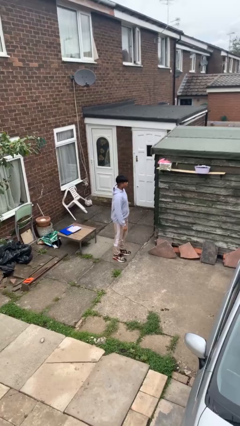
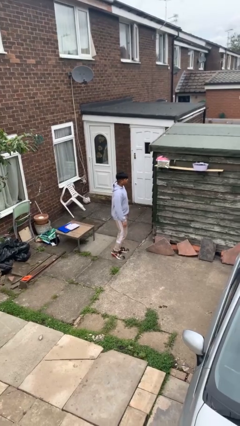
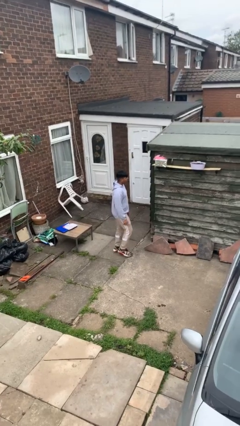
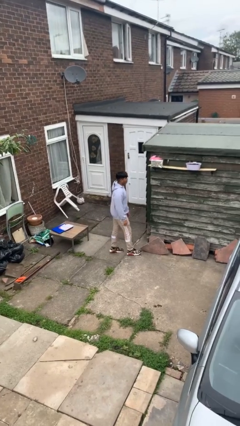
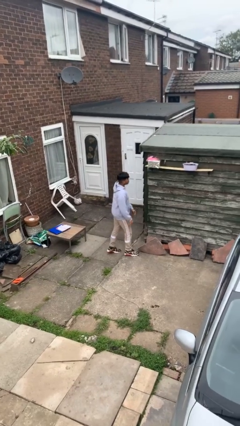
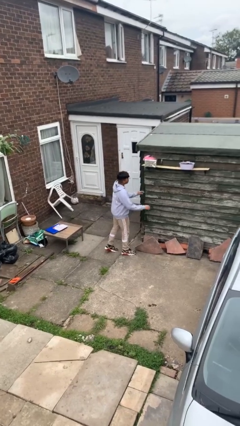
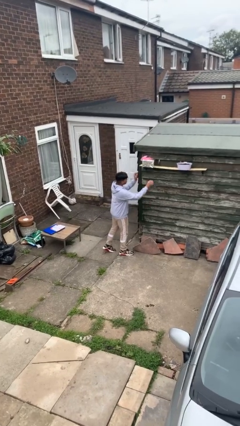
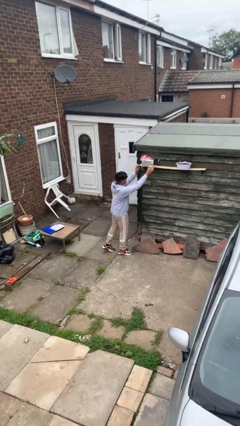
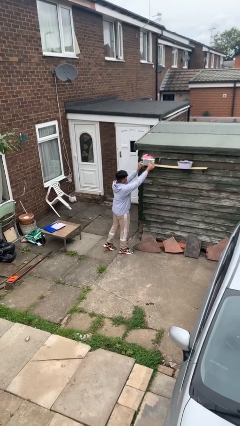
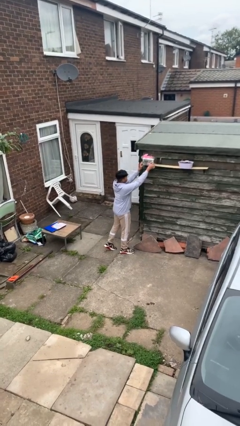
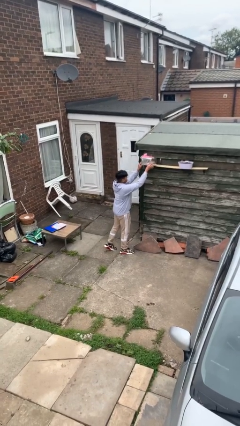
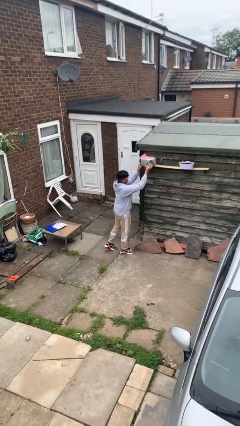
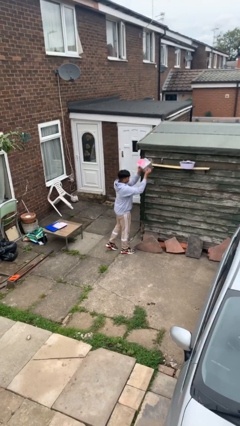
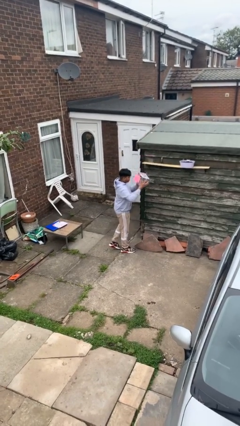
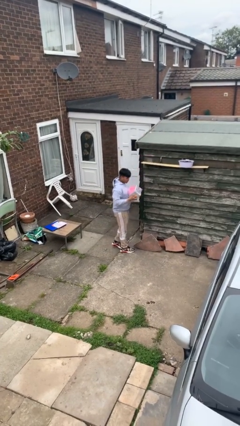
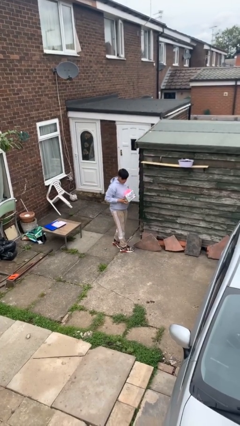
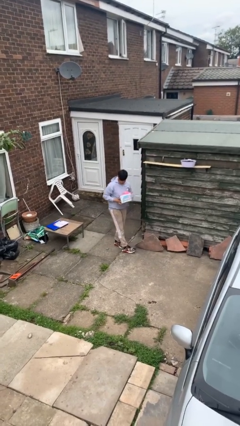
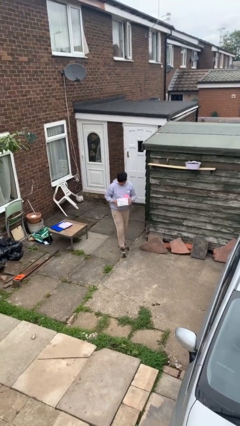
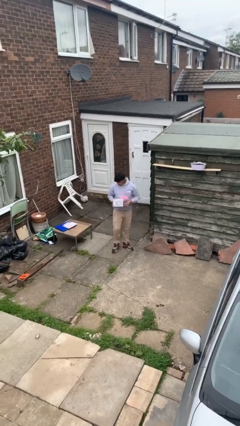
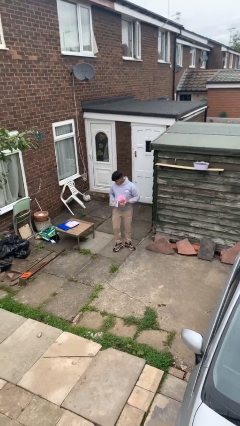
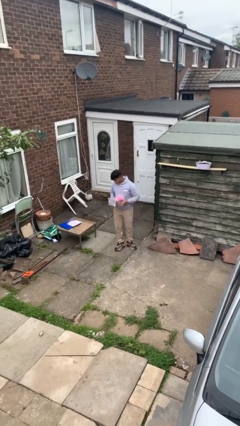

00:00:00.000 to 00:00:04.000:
person picks up object from shelf

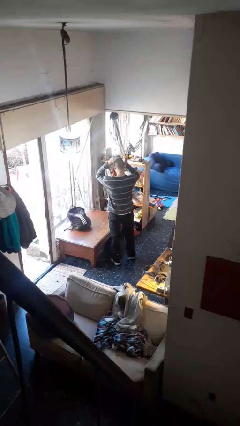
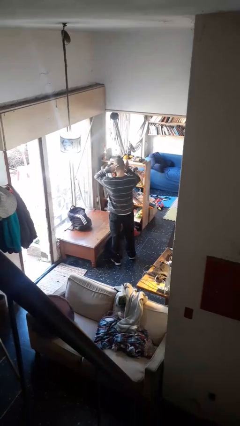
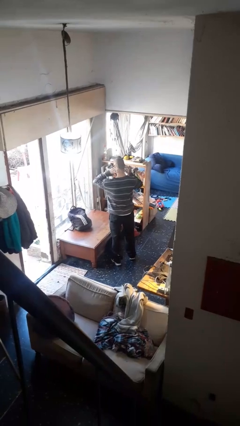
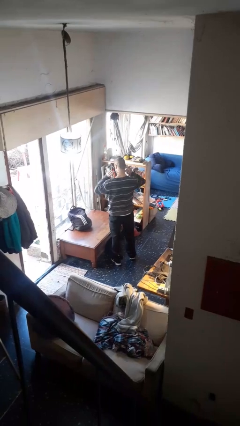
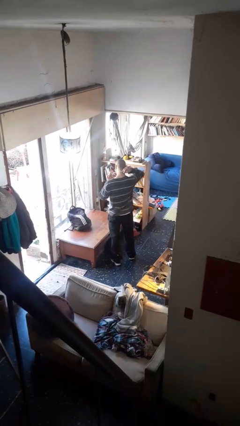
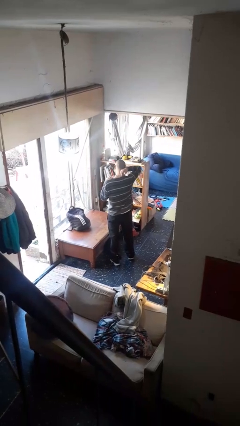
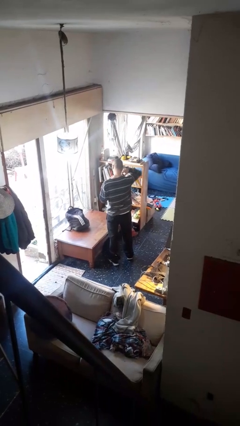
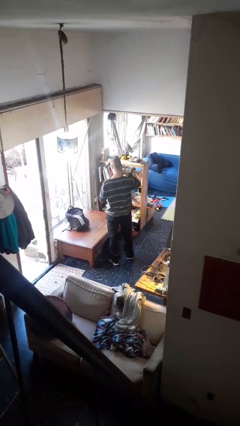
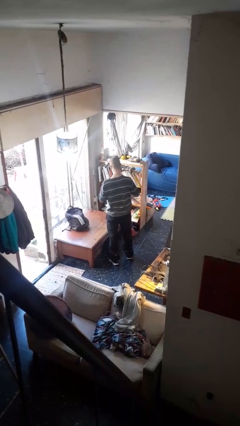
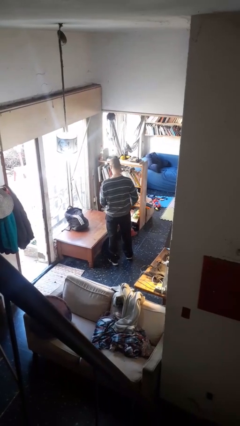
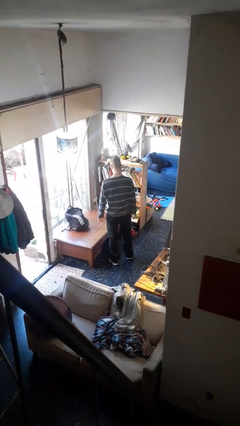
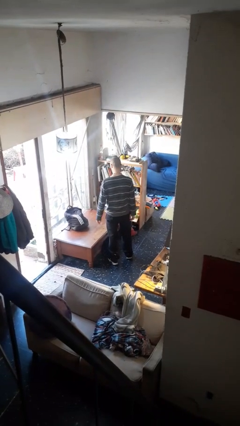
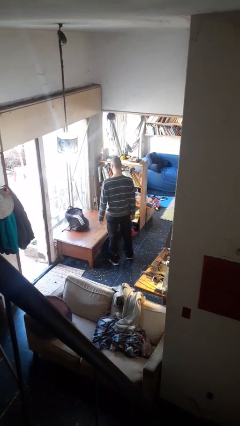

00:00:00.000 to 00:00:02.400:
person puts on necklace

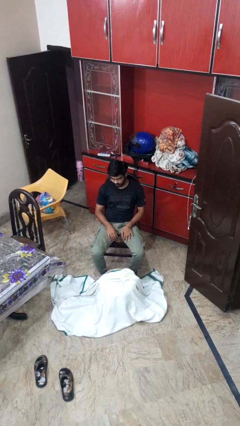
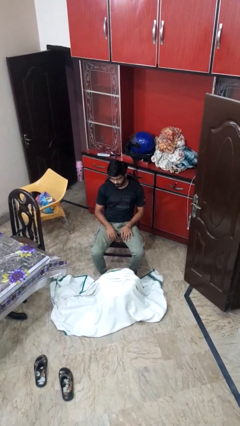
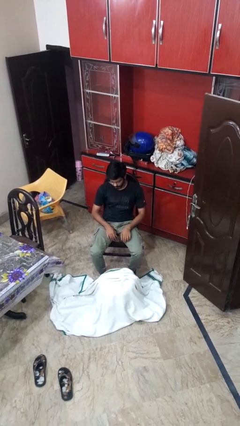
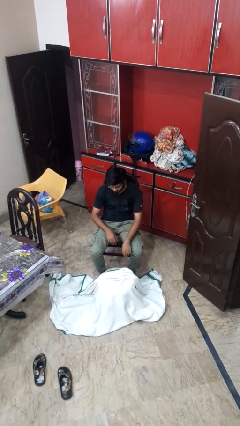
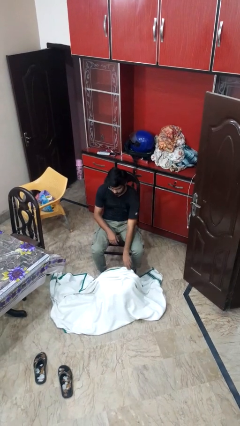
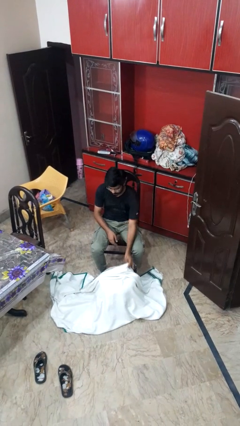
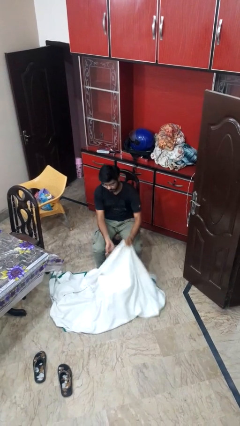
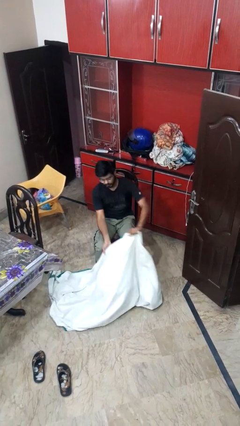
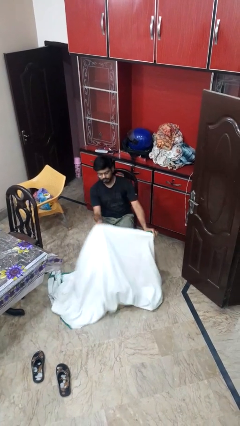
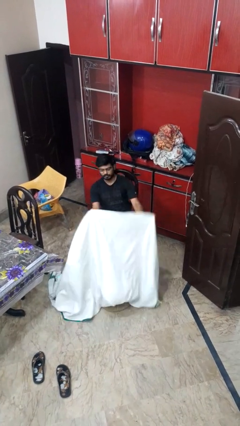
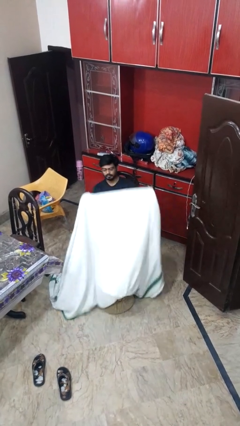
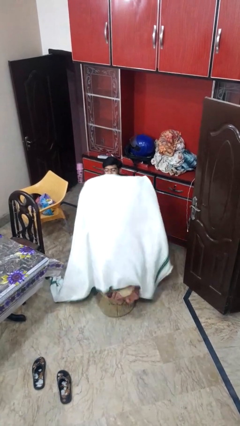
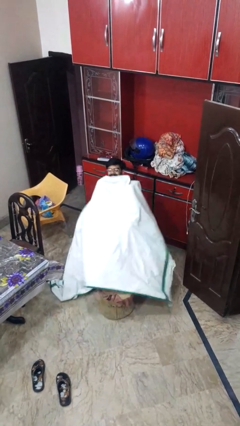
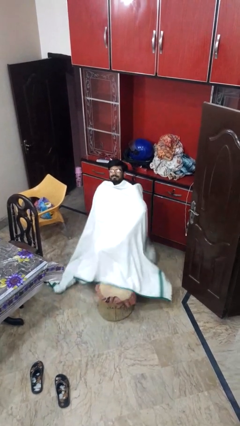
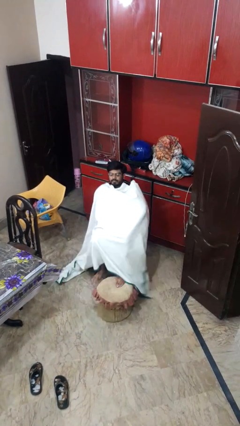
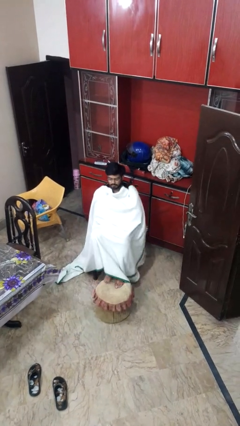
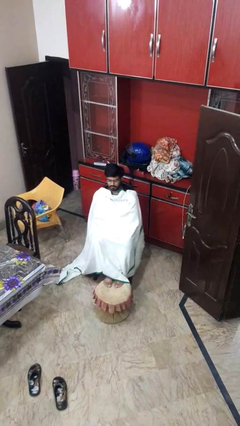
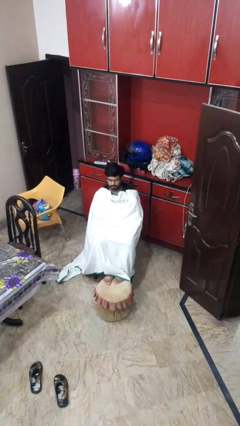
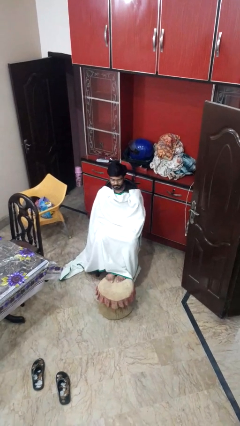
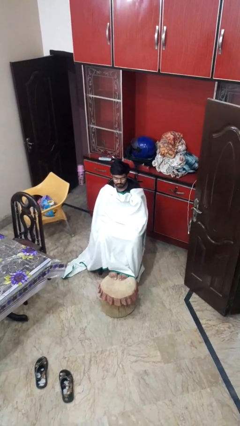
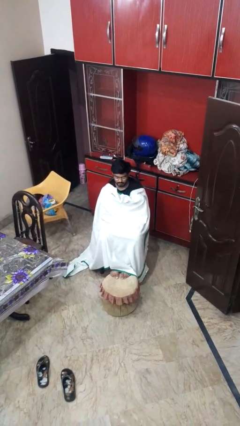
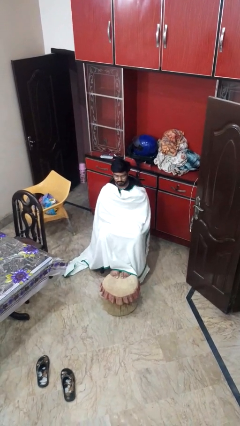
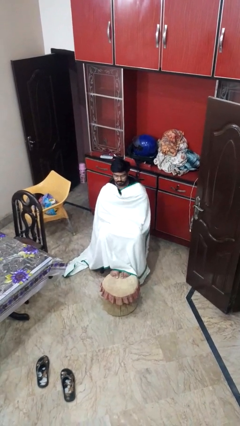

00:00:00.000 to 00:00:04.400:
person covers with blanket

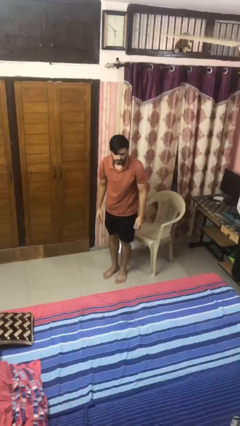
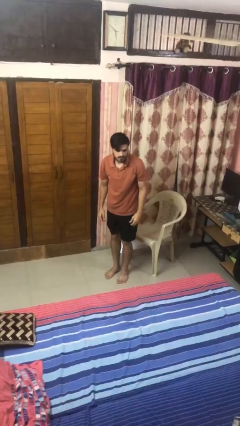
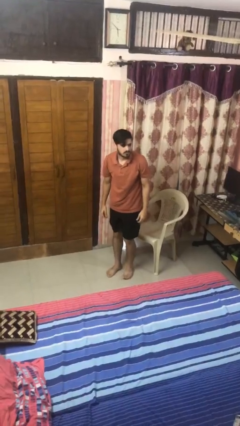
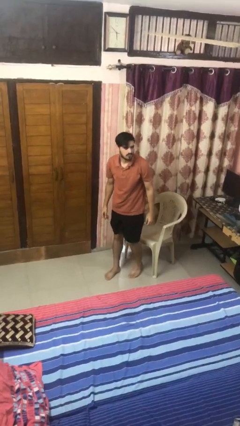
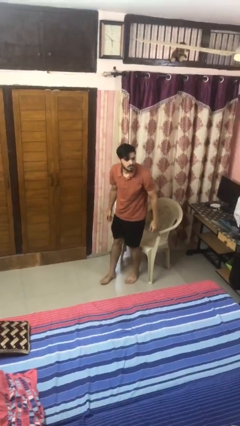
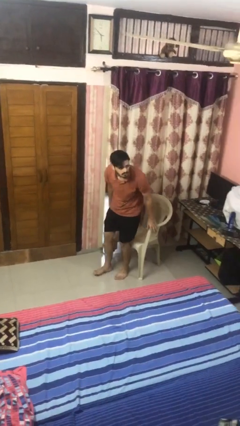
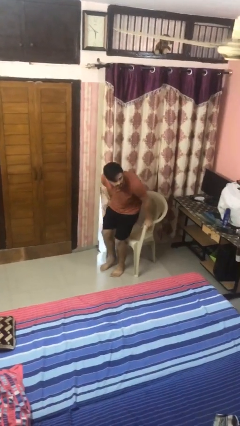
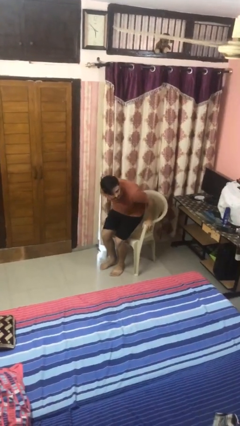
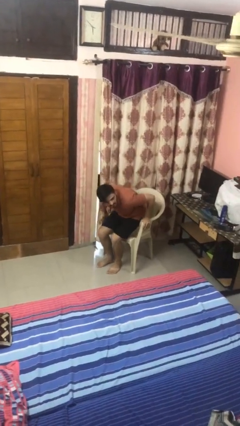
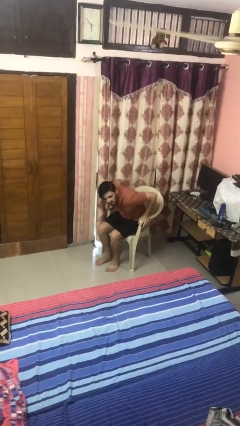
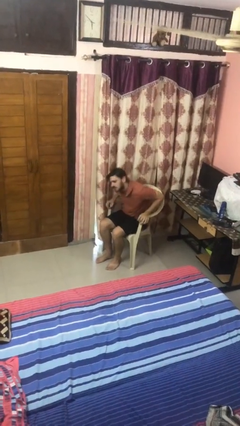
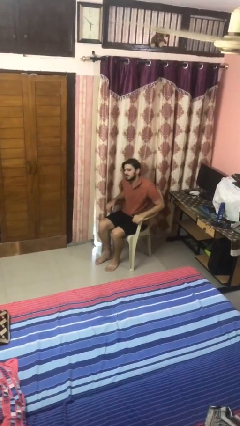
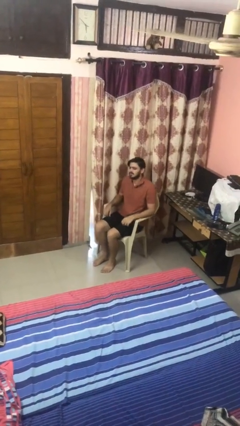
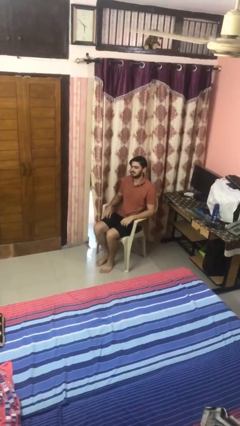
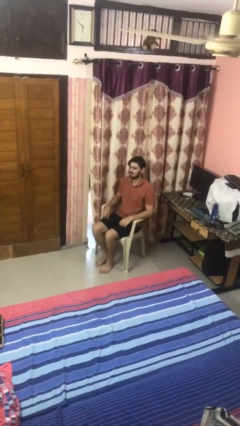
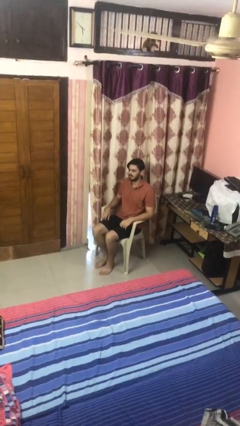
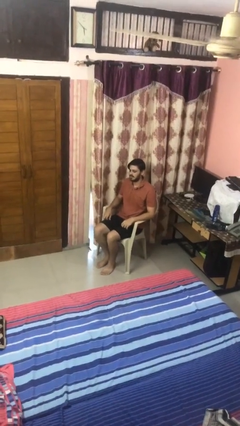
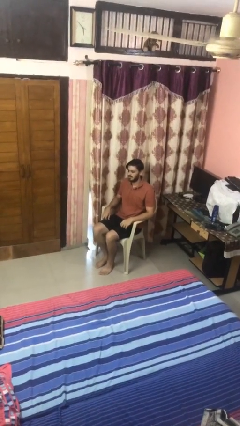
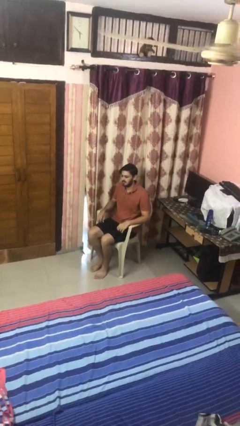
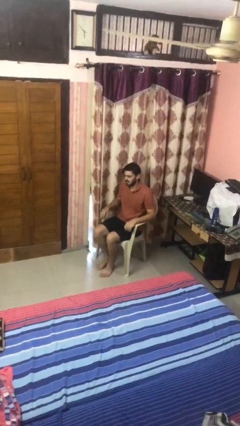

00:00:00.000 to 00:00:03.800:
person sits down

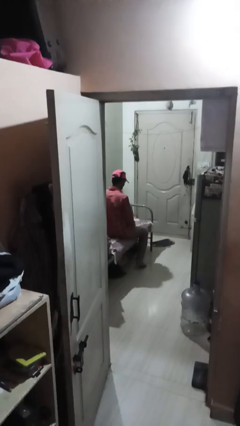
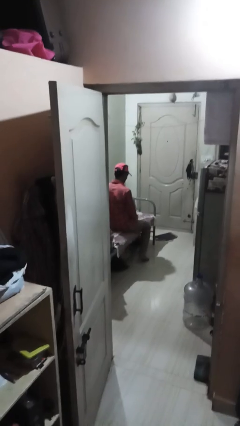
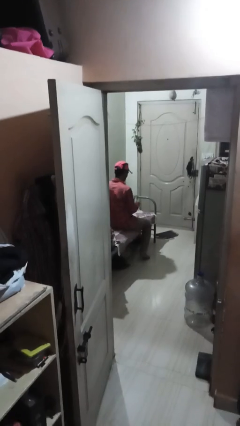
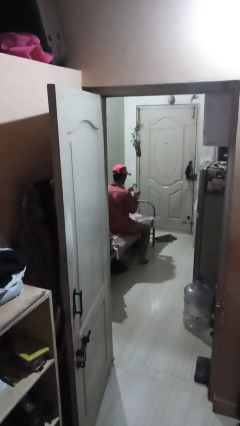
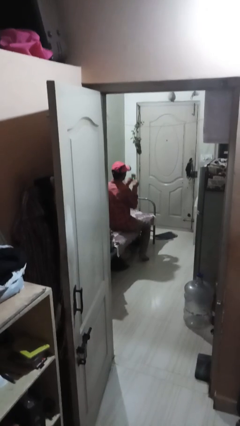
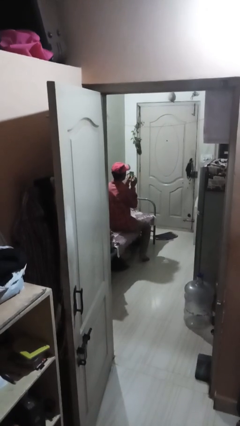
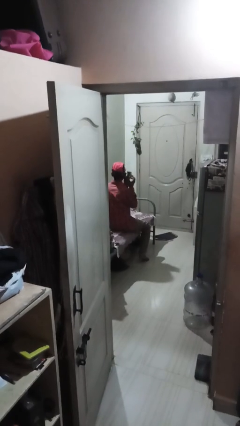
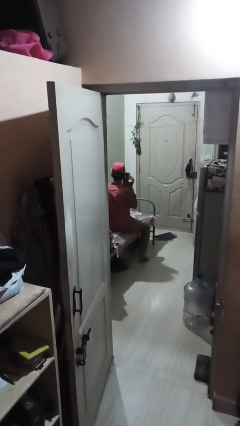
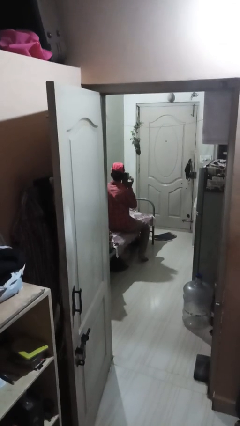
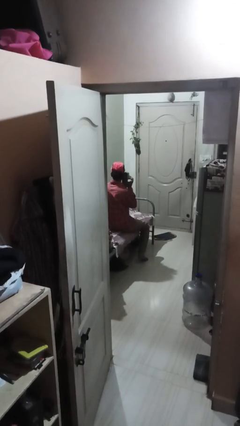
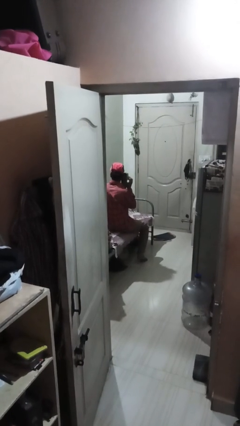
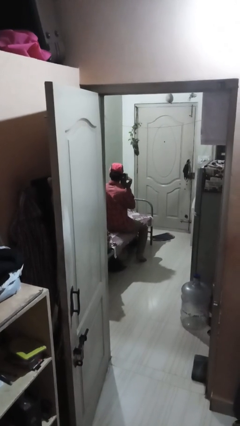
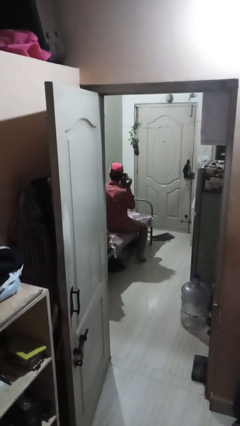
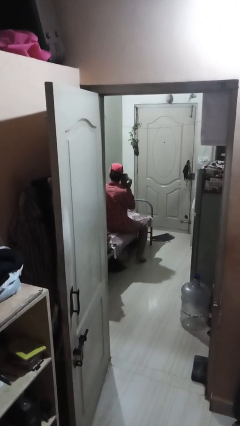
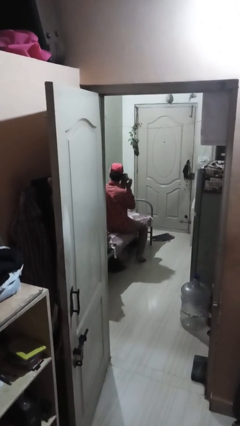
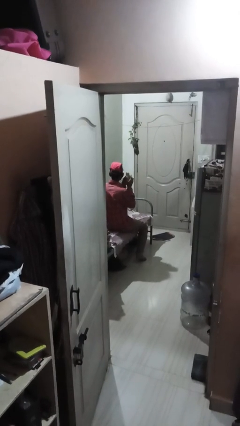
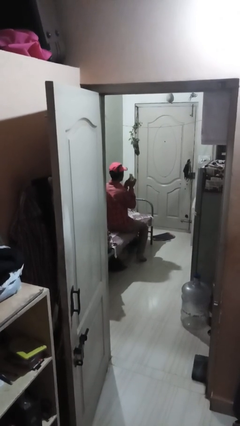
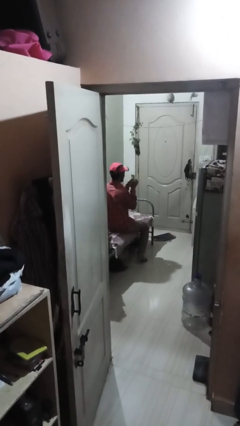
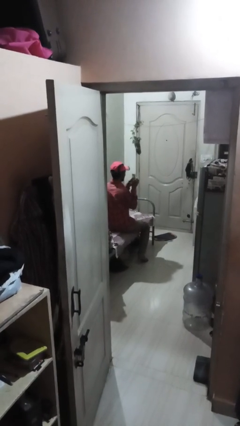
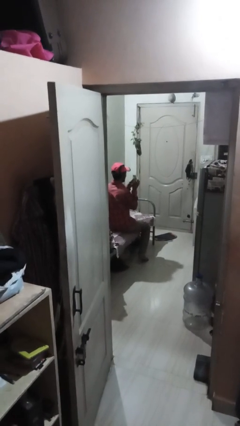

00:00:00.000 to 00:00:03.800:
person taps object with finger
